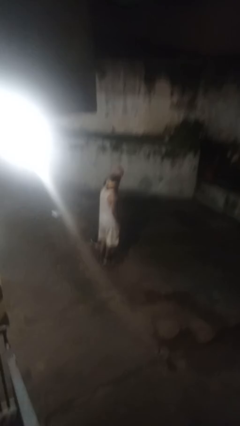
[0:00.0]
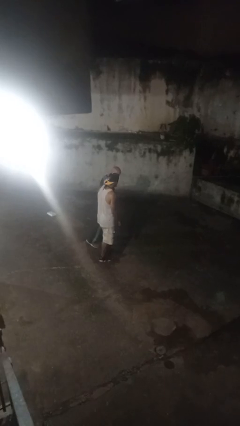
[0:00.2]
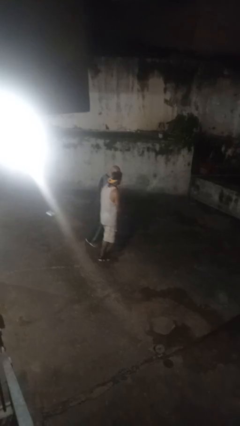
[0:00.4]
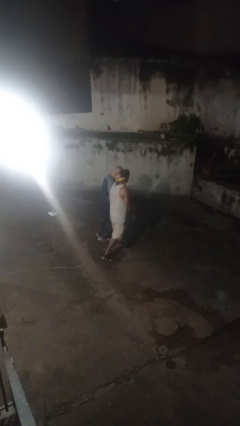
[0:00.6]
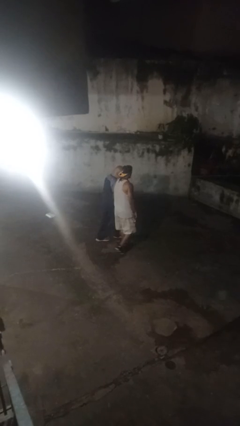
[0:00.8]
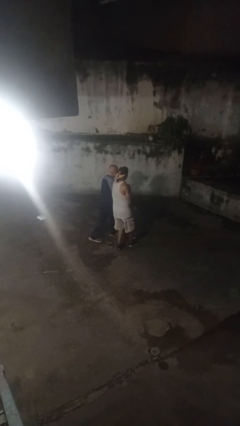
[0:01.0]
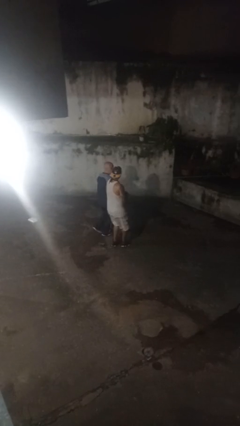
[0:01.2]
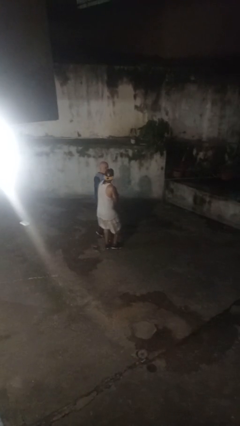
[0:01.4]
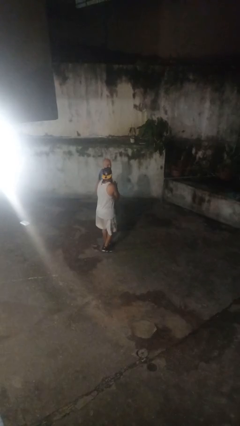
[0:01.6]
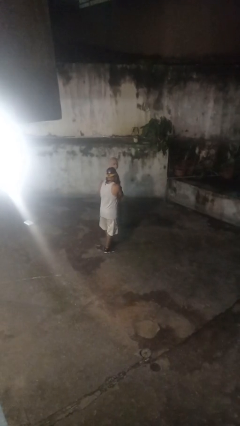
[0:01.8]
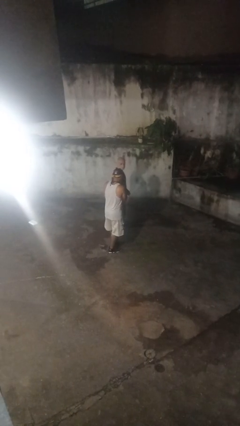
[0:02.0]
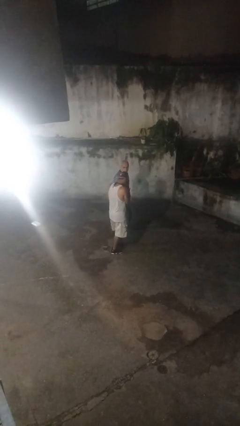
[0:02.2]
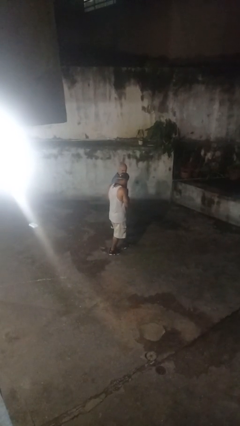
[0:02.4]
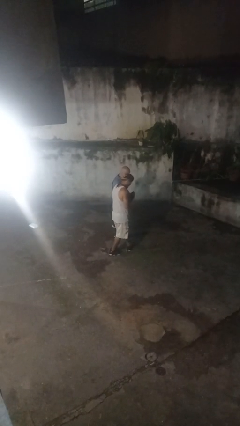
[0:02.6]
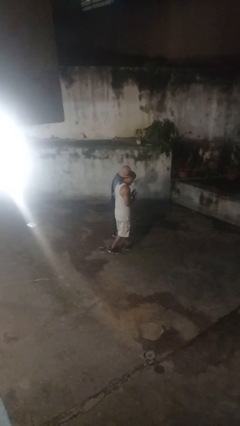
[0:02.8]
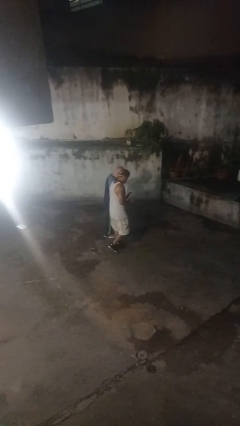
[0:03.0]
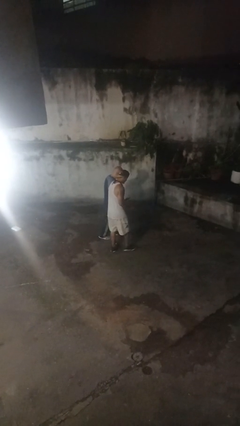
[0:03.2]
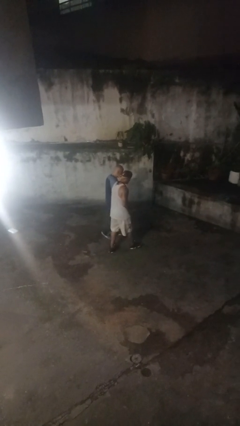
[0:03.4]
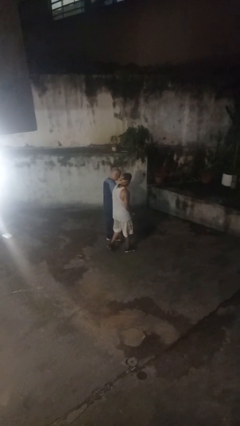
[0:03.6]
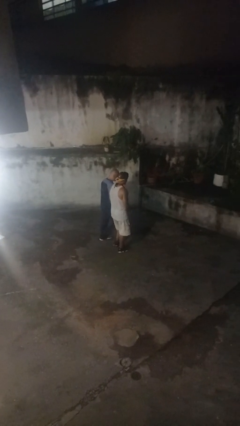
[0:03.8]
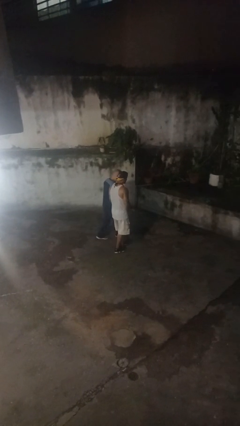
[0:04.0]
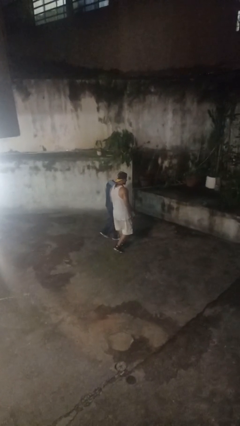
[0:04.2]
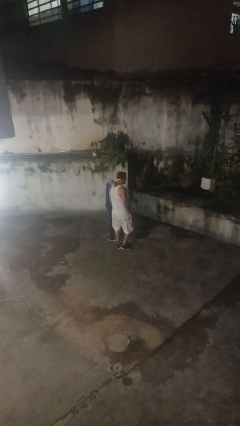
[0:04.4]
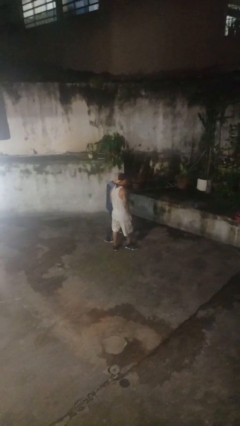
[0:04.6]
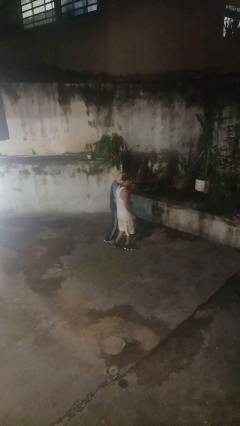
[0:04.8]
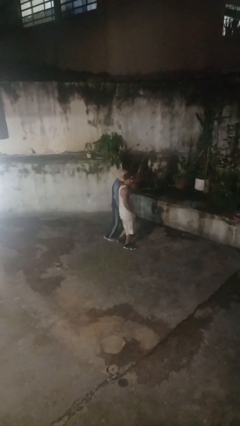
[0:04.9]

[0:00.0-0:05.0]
person bumps into person

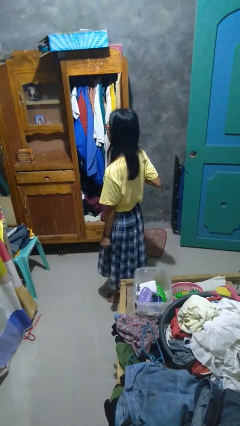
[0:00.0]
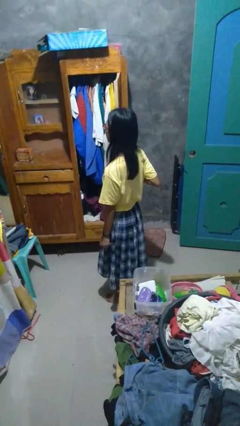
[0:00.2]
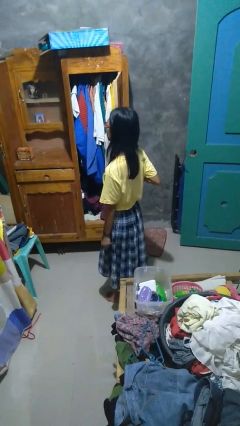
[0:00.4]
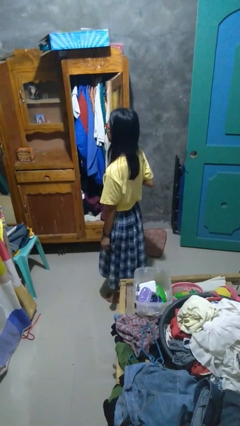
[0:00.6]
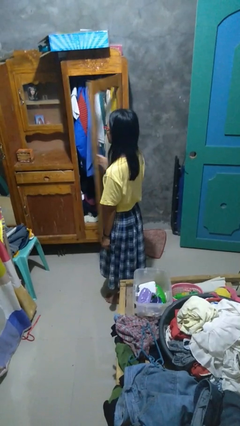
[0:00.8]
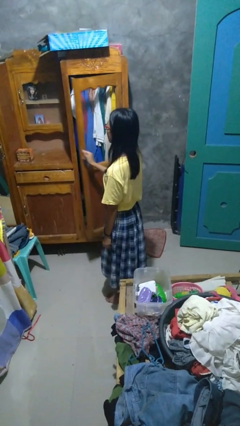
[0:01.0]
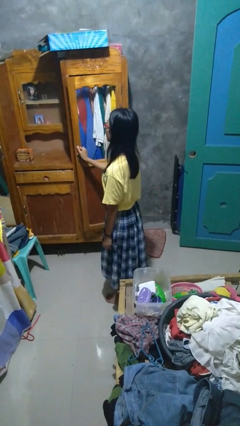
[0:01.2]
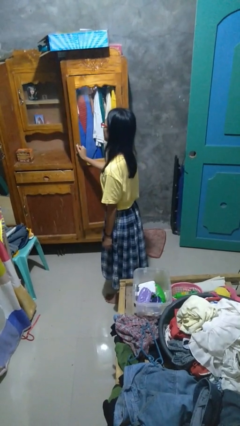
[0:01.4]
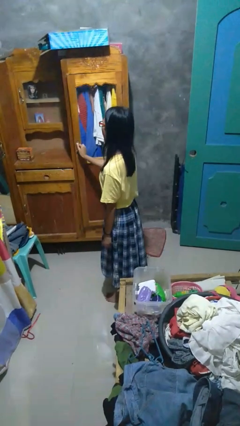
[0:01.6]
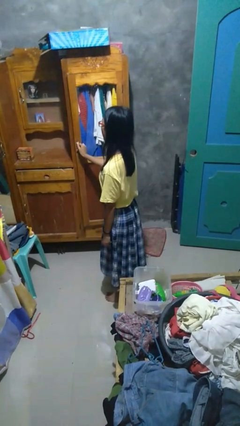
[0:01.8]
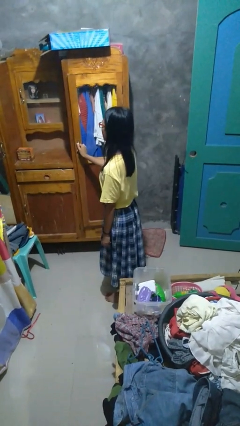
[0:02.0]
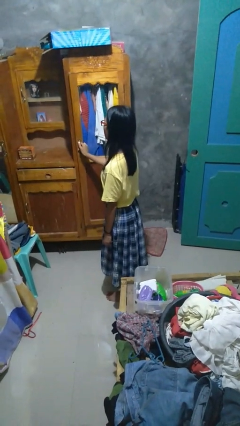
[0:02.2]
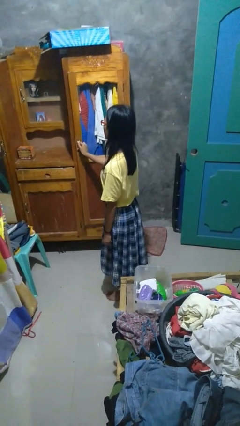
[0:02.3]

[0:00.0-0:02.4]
person closes closet door

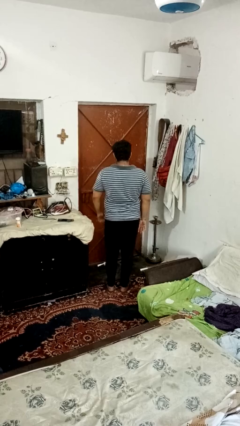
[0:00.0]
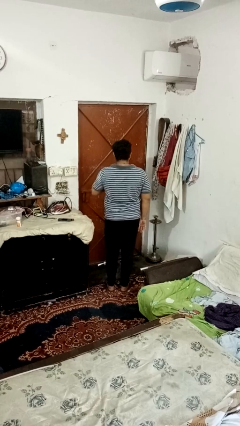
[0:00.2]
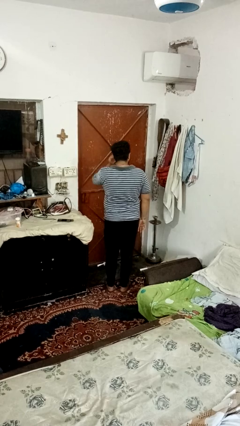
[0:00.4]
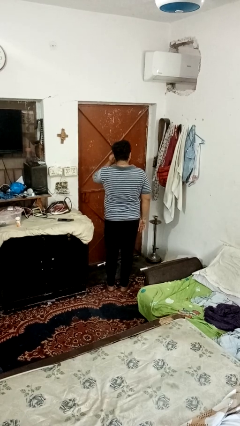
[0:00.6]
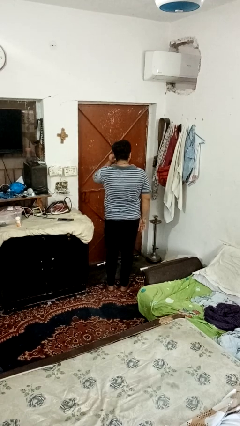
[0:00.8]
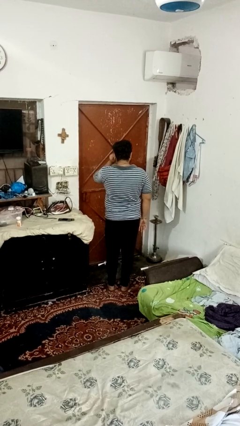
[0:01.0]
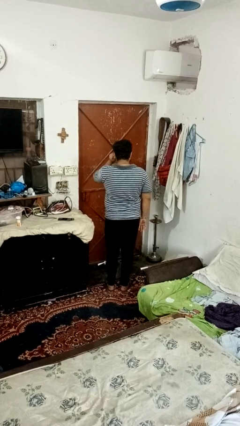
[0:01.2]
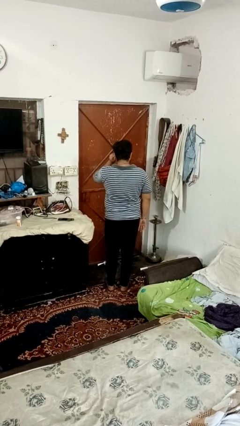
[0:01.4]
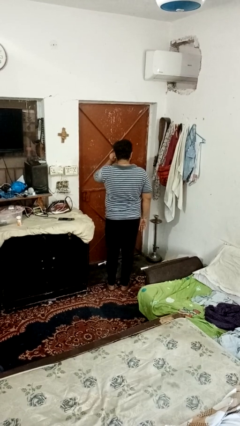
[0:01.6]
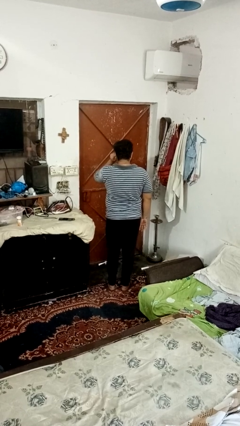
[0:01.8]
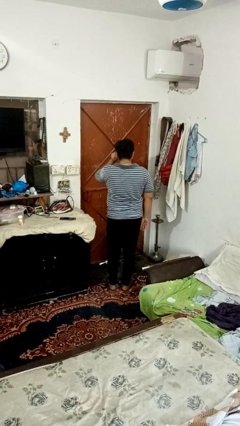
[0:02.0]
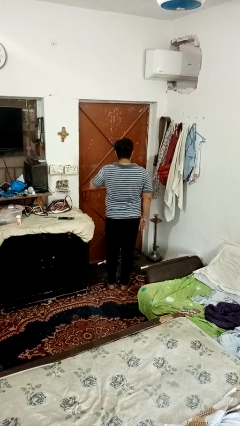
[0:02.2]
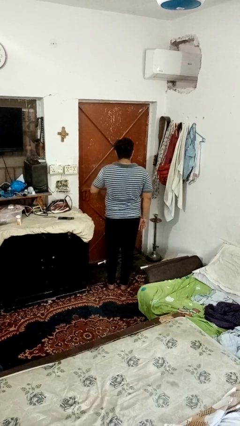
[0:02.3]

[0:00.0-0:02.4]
person touches earlobe

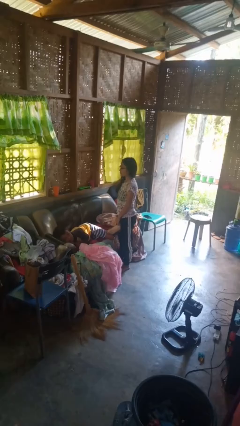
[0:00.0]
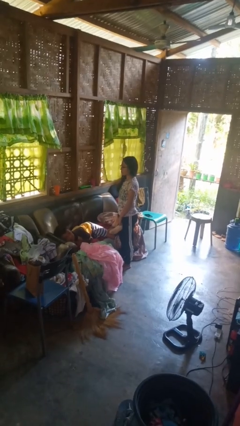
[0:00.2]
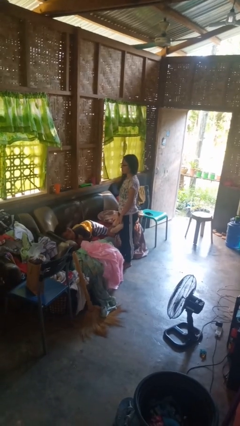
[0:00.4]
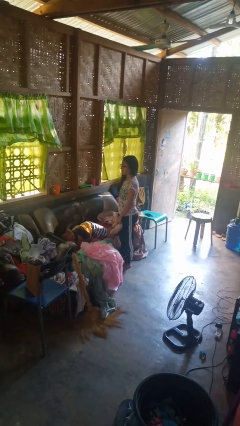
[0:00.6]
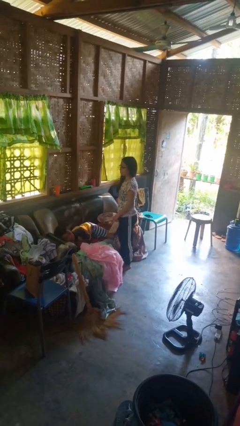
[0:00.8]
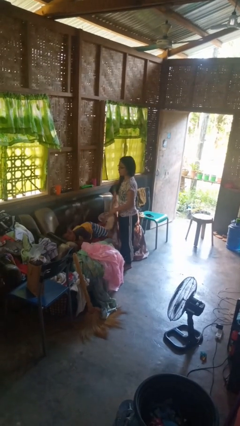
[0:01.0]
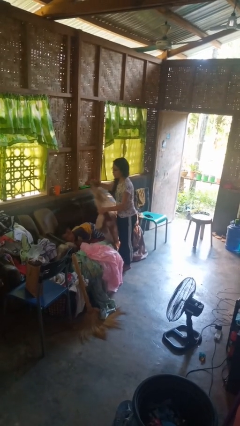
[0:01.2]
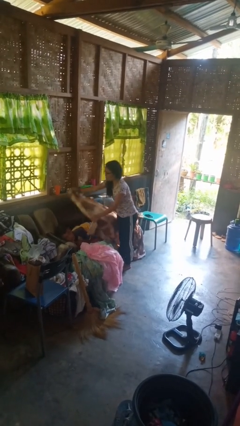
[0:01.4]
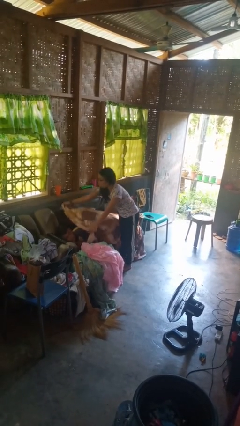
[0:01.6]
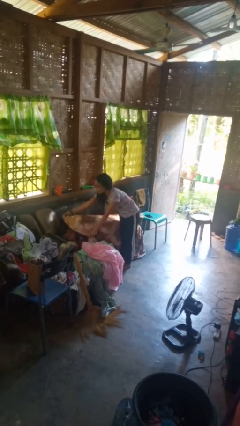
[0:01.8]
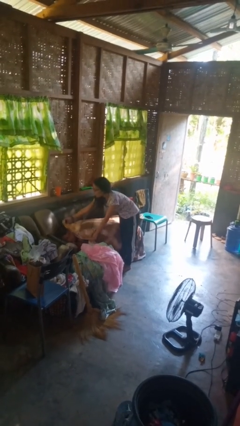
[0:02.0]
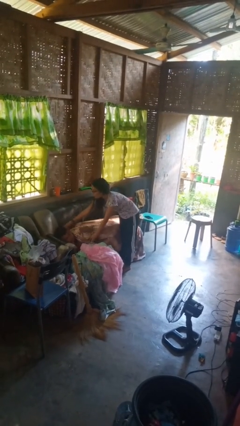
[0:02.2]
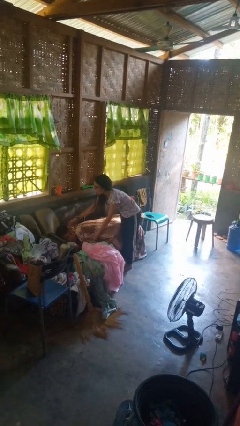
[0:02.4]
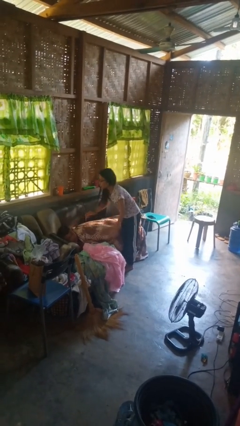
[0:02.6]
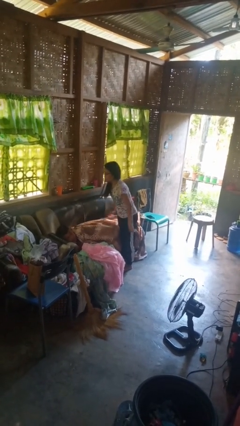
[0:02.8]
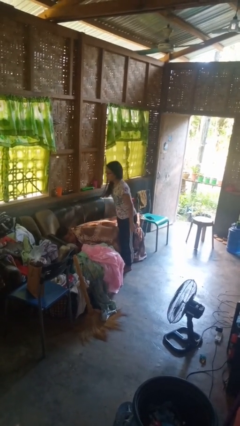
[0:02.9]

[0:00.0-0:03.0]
person covers friend with blanket

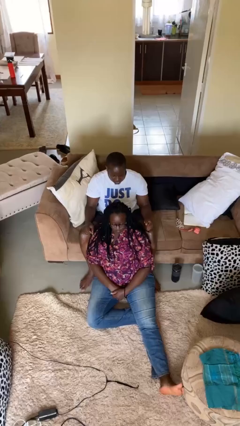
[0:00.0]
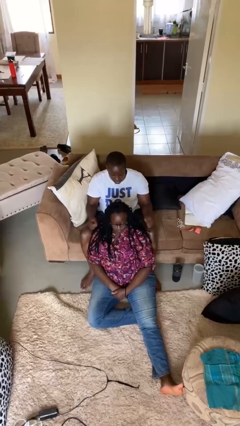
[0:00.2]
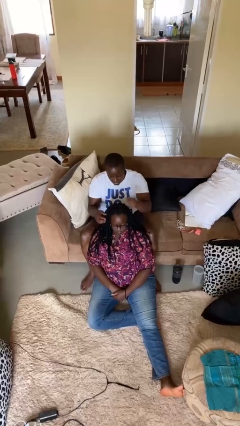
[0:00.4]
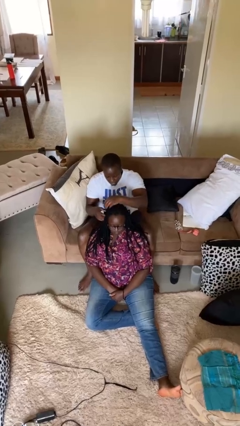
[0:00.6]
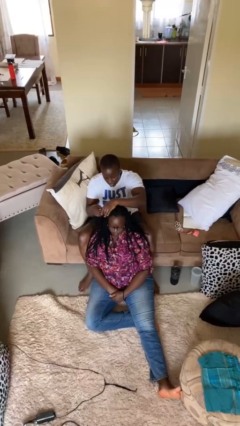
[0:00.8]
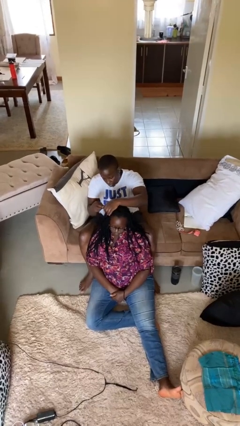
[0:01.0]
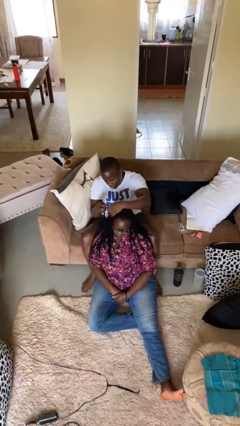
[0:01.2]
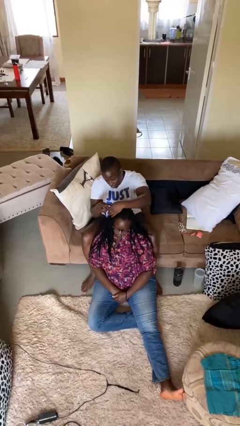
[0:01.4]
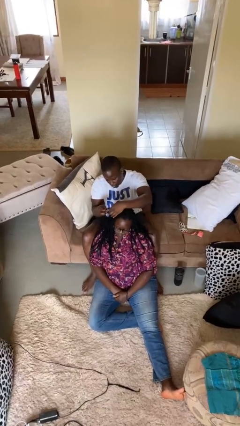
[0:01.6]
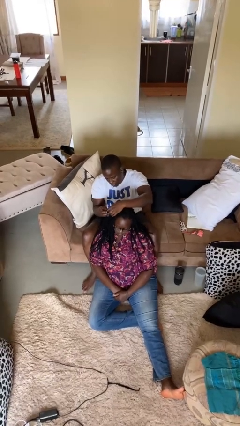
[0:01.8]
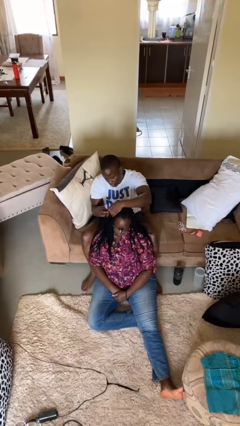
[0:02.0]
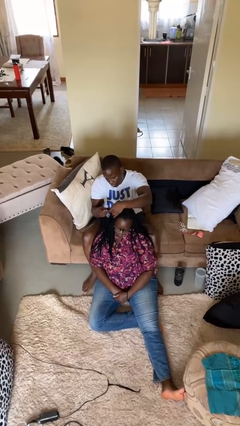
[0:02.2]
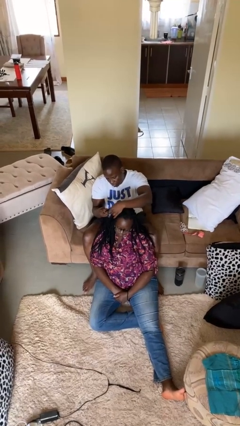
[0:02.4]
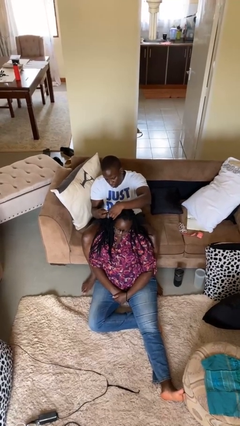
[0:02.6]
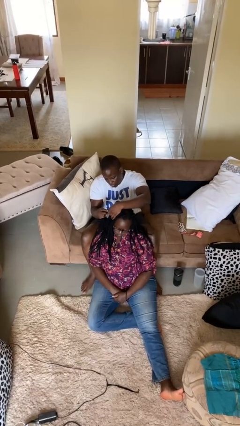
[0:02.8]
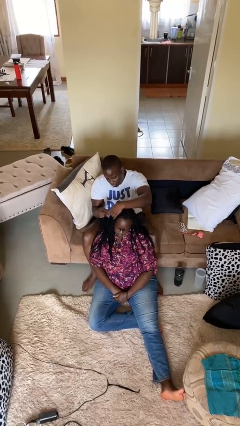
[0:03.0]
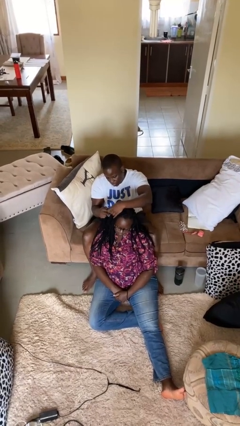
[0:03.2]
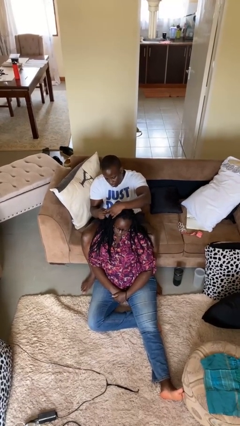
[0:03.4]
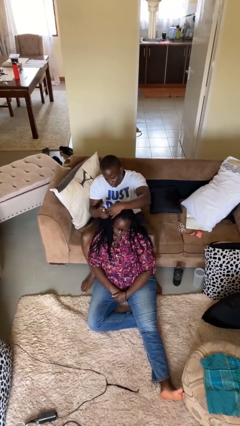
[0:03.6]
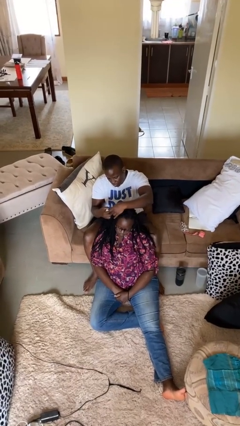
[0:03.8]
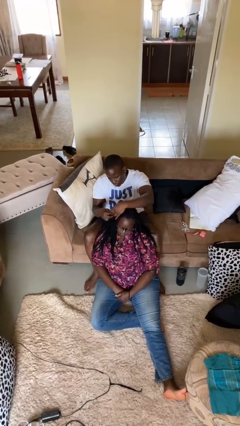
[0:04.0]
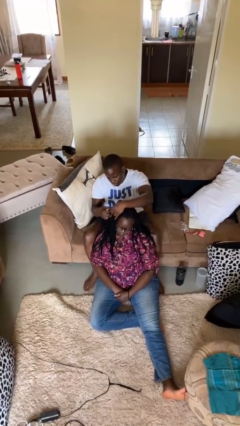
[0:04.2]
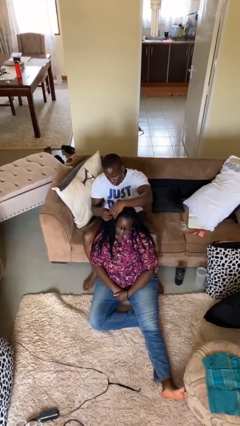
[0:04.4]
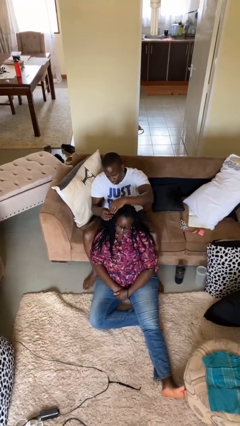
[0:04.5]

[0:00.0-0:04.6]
person braids hair of person

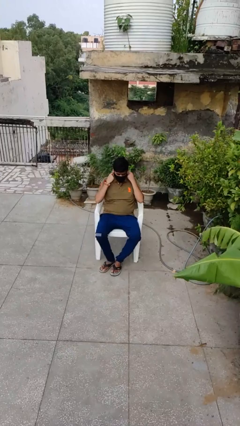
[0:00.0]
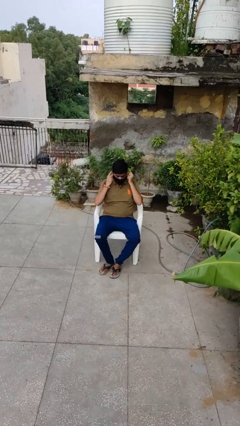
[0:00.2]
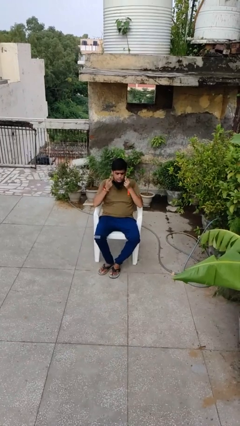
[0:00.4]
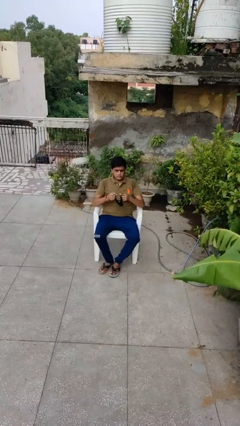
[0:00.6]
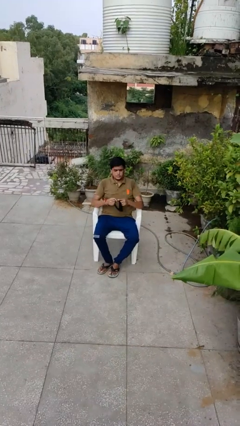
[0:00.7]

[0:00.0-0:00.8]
person takes off facemask
